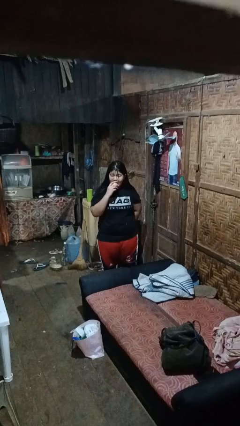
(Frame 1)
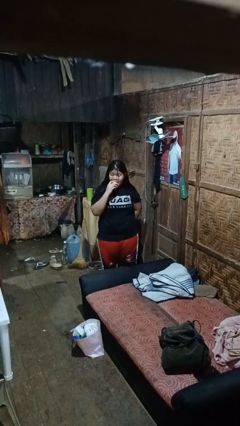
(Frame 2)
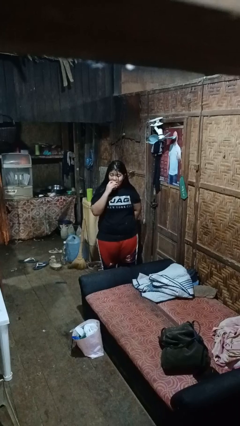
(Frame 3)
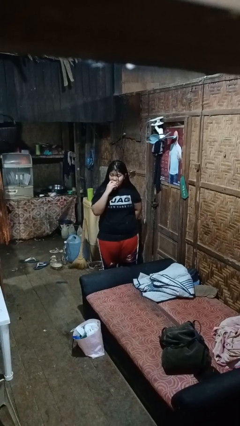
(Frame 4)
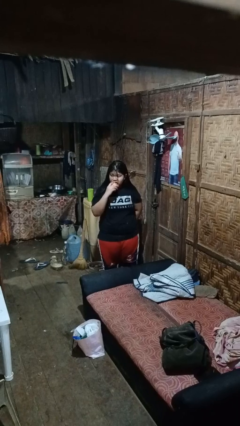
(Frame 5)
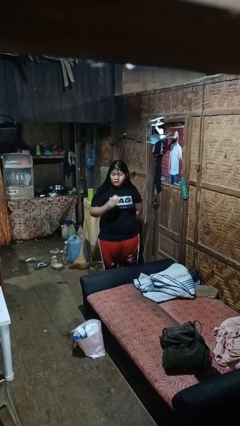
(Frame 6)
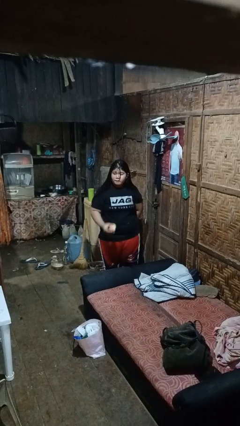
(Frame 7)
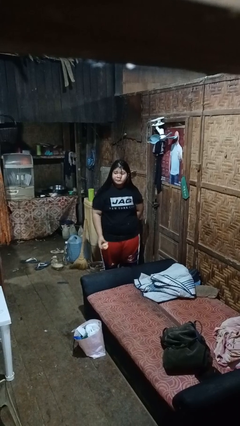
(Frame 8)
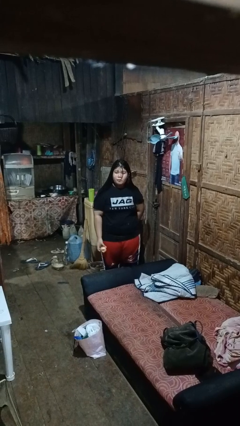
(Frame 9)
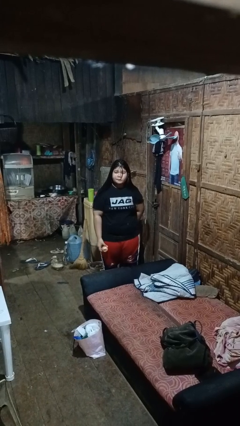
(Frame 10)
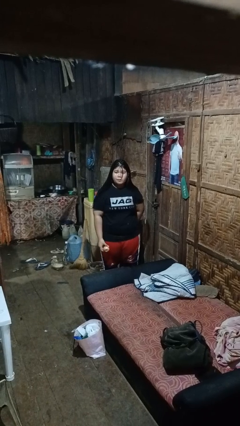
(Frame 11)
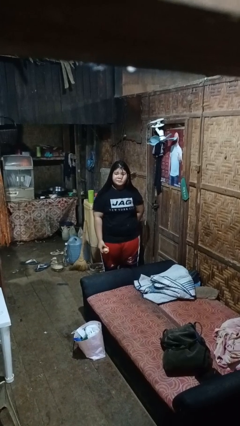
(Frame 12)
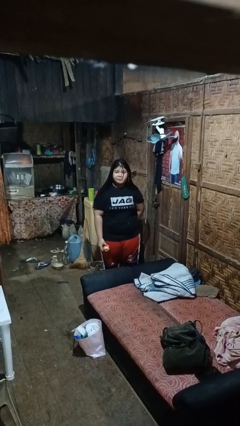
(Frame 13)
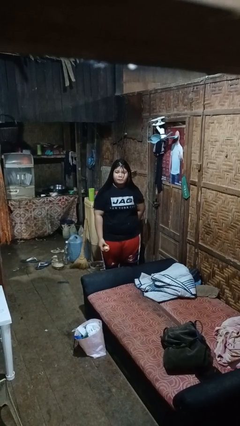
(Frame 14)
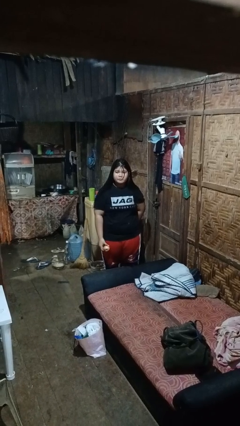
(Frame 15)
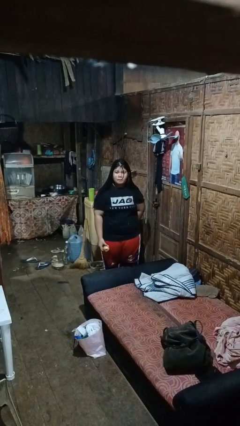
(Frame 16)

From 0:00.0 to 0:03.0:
person eats apple

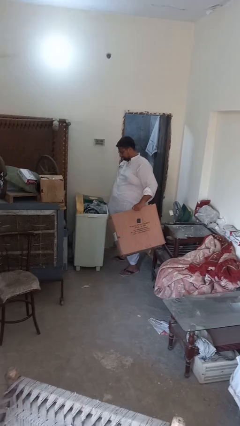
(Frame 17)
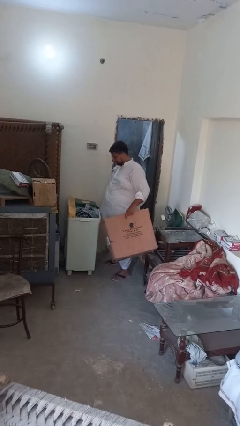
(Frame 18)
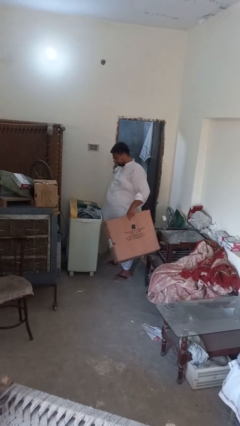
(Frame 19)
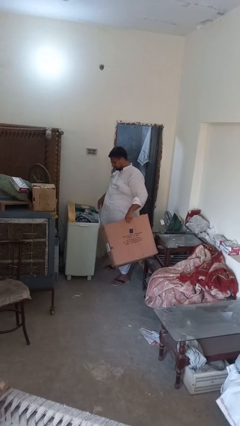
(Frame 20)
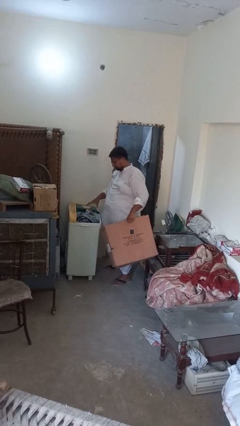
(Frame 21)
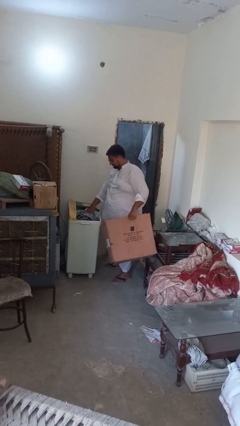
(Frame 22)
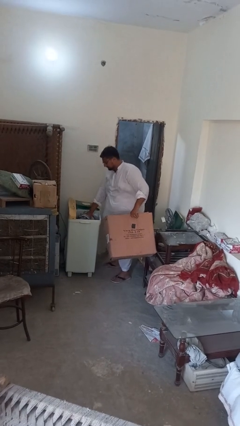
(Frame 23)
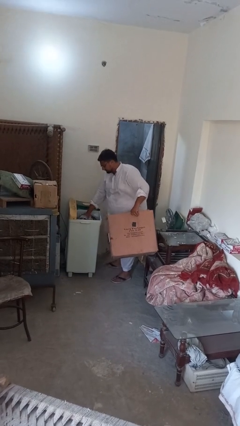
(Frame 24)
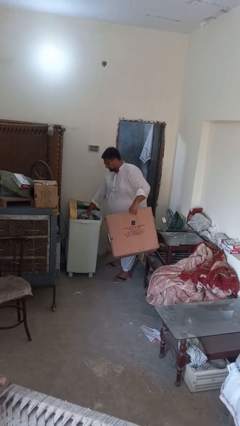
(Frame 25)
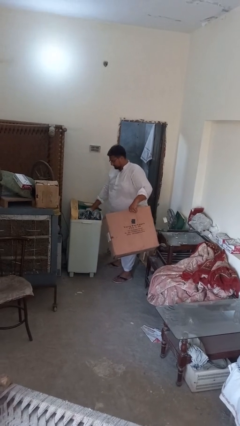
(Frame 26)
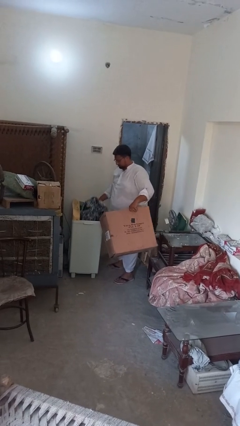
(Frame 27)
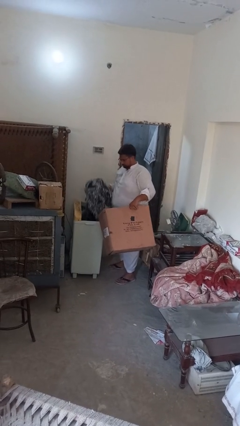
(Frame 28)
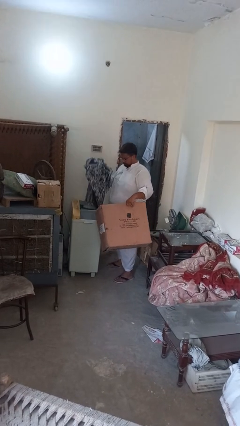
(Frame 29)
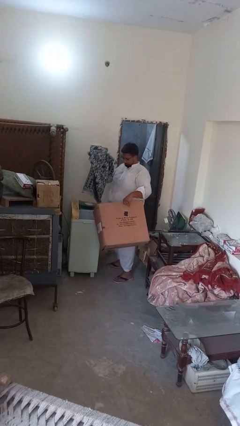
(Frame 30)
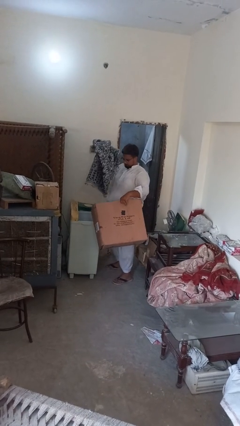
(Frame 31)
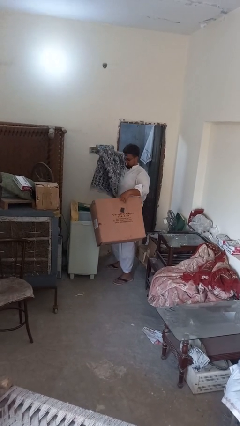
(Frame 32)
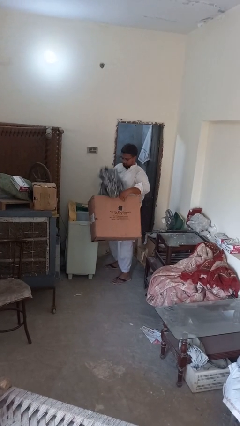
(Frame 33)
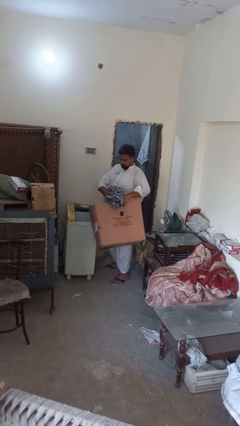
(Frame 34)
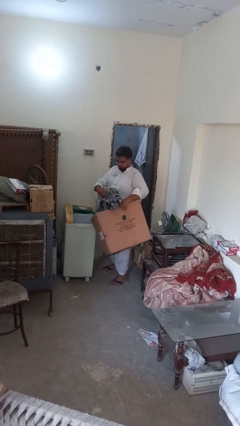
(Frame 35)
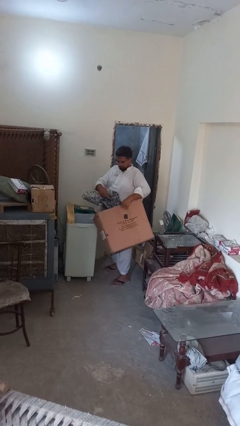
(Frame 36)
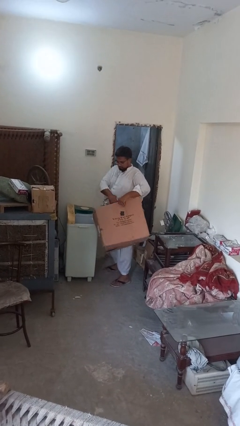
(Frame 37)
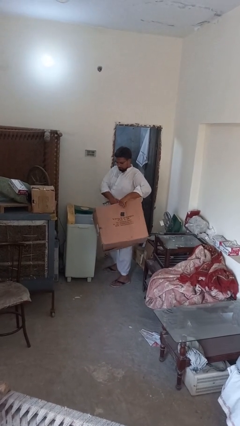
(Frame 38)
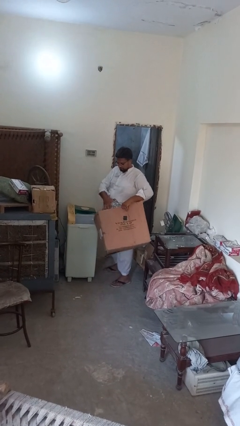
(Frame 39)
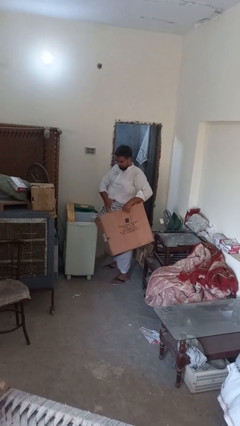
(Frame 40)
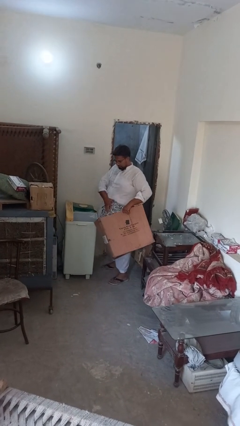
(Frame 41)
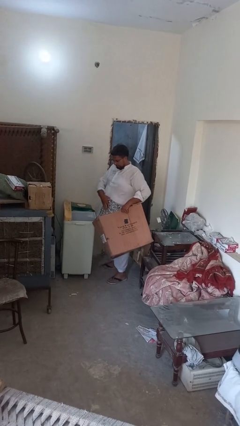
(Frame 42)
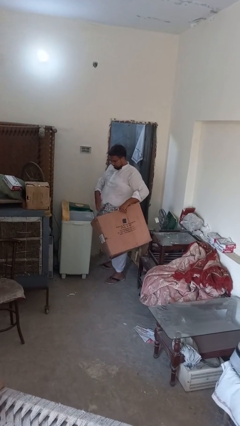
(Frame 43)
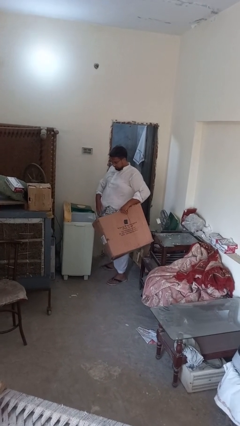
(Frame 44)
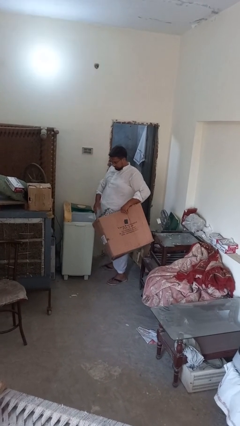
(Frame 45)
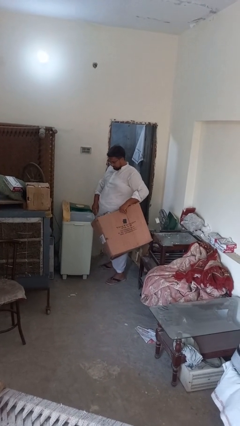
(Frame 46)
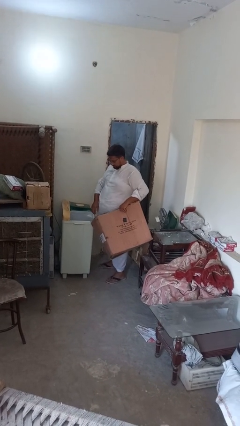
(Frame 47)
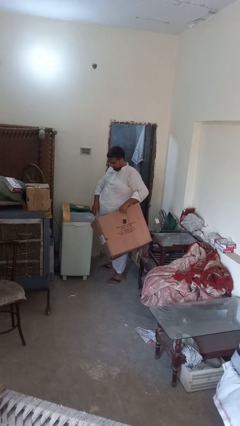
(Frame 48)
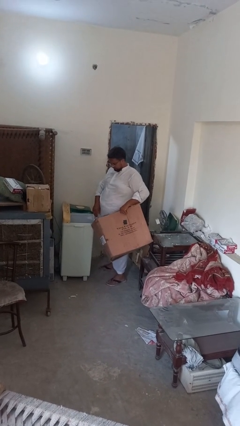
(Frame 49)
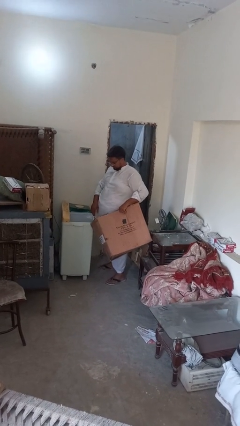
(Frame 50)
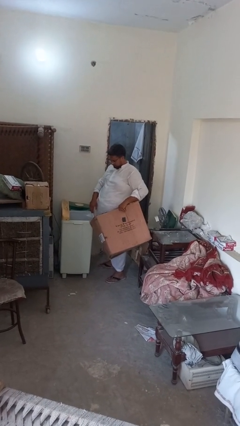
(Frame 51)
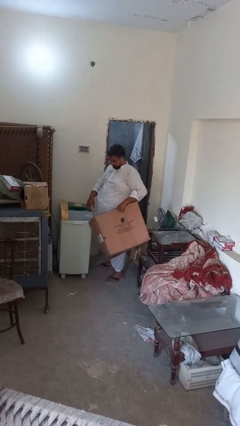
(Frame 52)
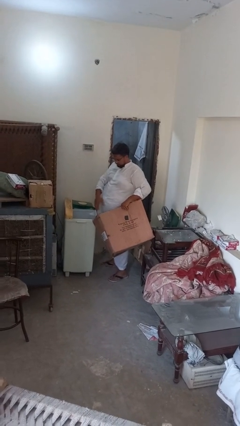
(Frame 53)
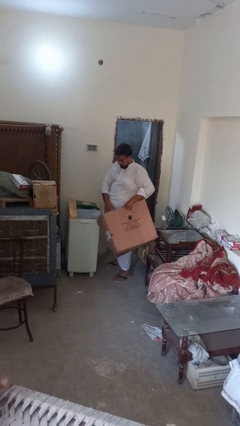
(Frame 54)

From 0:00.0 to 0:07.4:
person unloads dryer

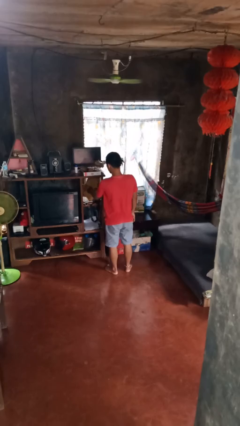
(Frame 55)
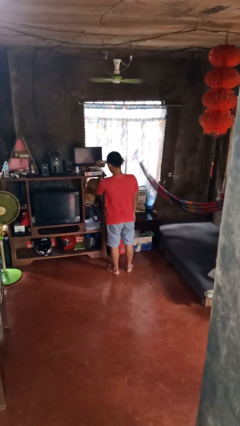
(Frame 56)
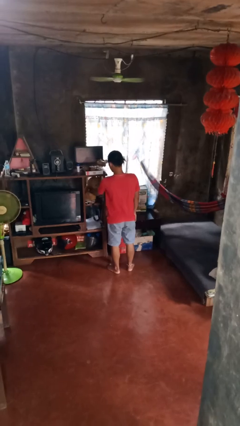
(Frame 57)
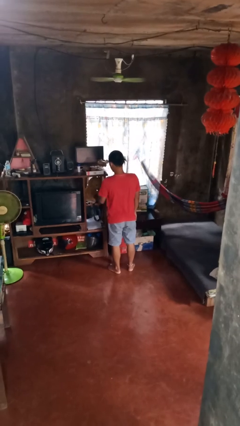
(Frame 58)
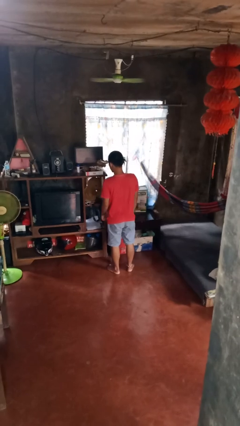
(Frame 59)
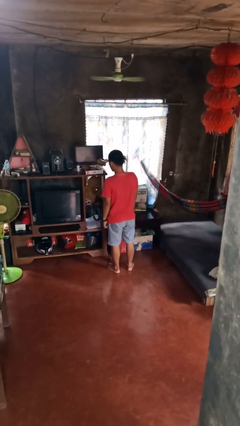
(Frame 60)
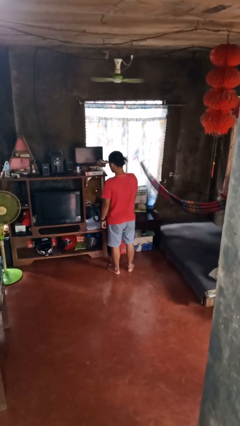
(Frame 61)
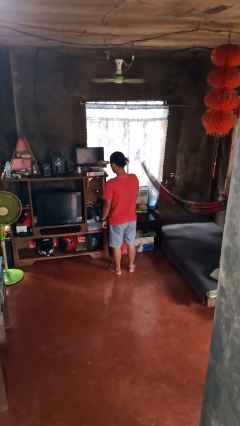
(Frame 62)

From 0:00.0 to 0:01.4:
person puts down object into cabinet

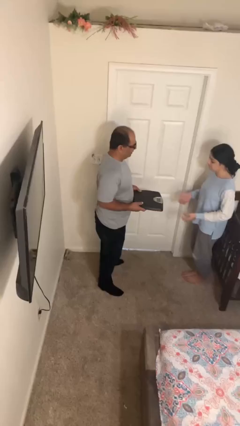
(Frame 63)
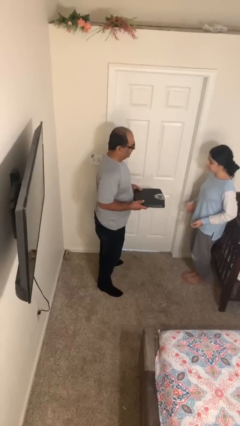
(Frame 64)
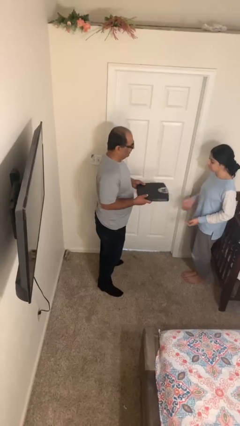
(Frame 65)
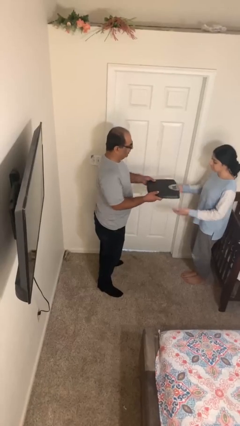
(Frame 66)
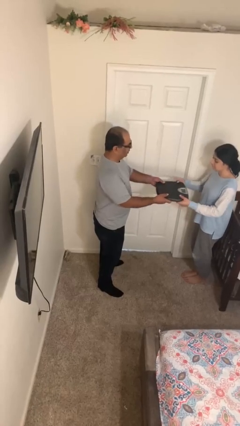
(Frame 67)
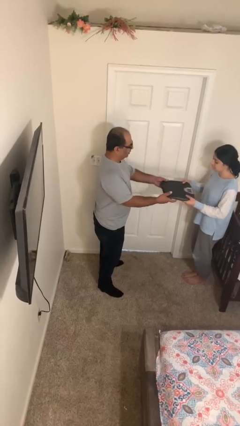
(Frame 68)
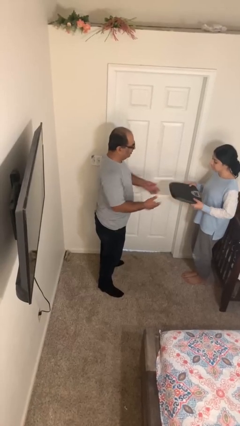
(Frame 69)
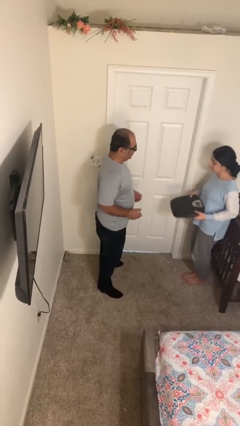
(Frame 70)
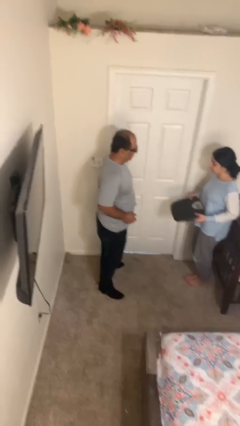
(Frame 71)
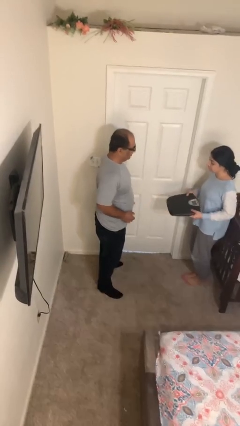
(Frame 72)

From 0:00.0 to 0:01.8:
person transfers object to person

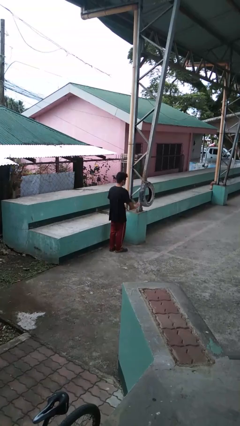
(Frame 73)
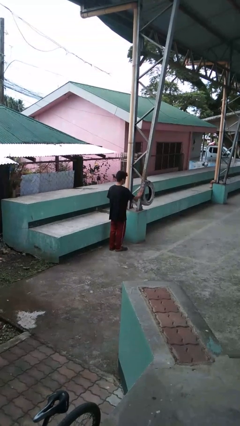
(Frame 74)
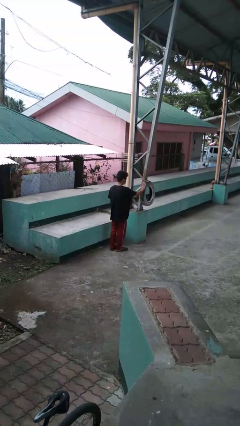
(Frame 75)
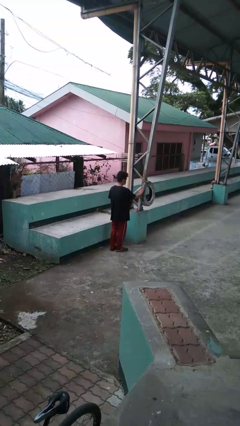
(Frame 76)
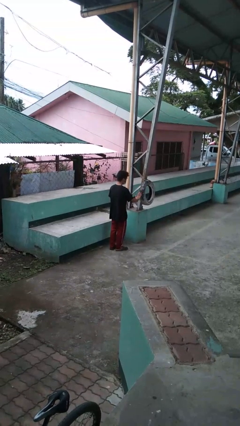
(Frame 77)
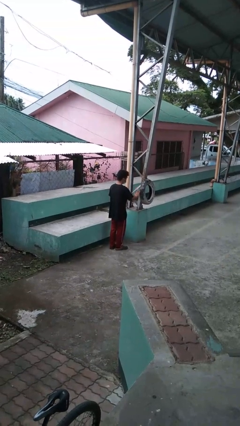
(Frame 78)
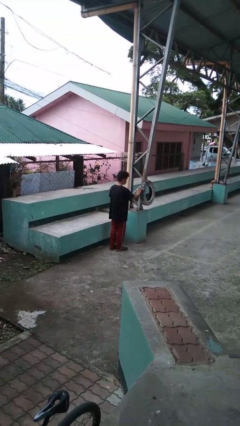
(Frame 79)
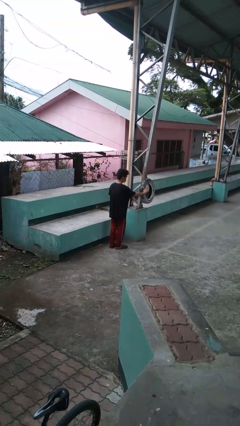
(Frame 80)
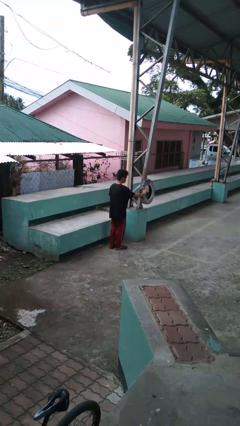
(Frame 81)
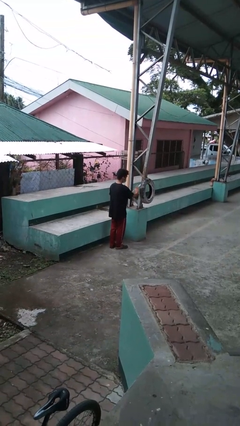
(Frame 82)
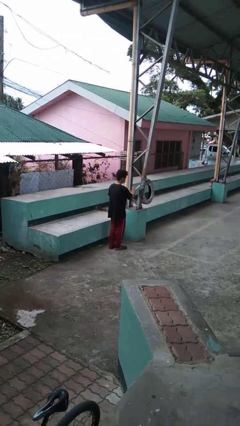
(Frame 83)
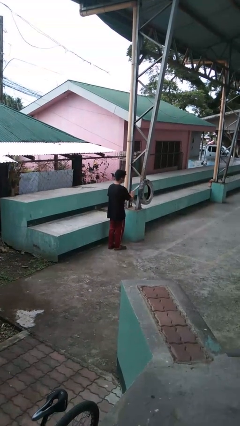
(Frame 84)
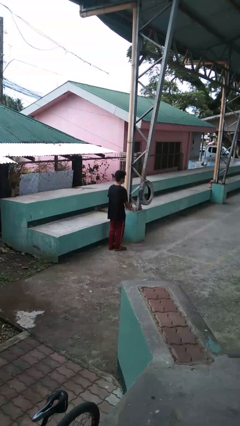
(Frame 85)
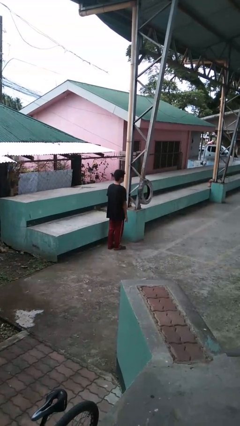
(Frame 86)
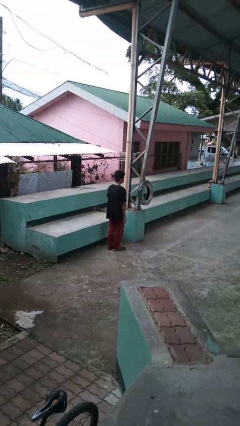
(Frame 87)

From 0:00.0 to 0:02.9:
person waves hand over object

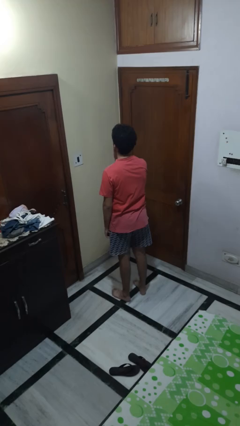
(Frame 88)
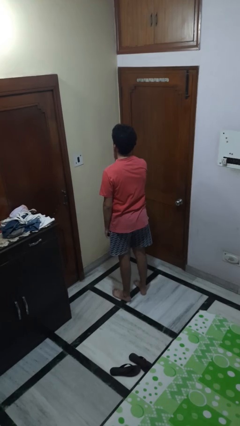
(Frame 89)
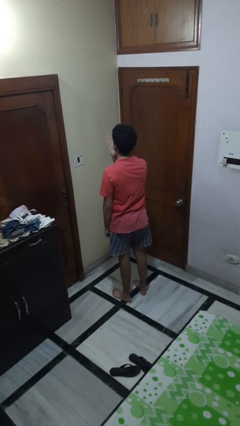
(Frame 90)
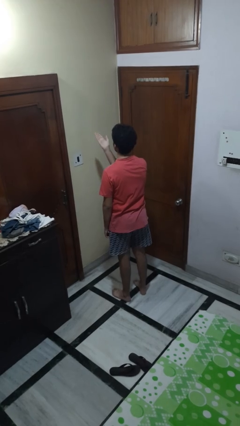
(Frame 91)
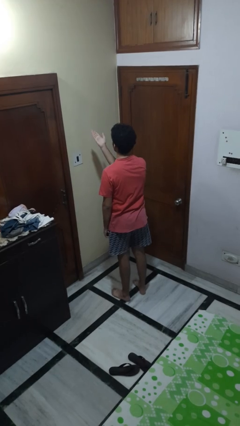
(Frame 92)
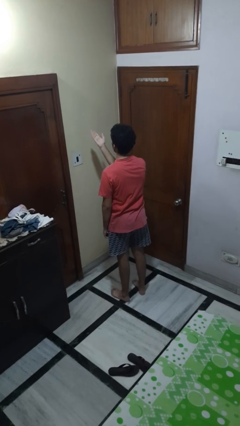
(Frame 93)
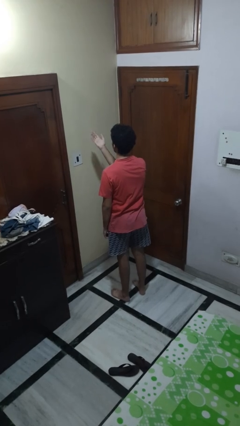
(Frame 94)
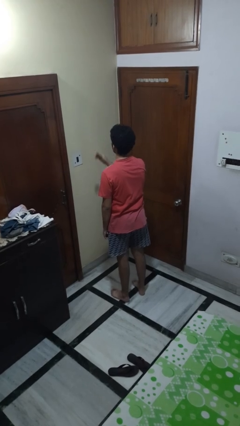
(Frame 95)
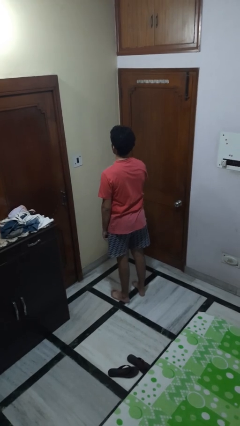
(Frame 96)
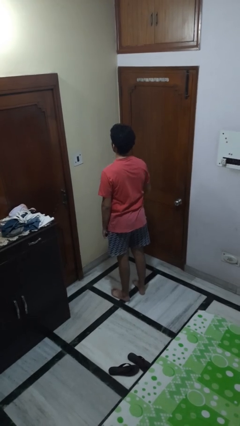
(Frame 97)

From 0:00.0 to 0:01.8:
person gestures blow kiss
